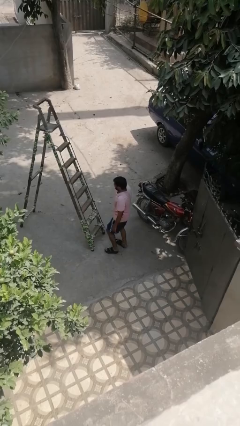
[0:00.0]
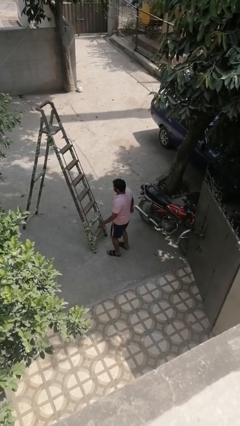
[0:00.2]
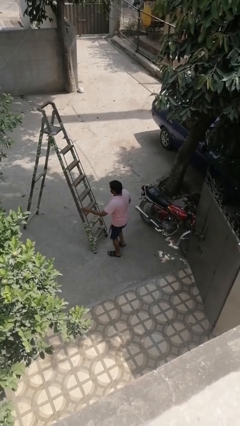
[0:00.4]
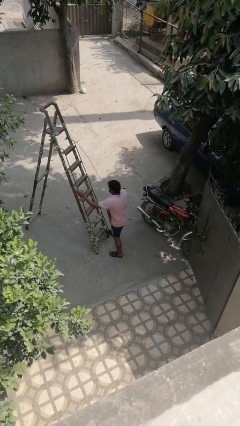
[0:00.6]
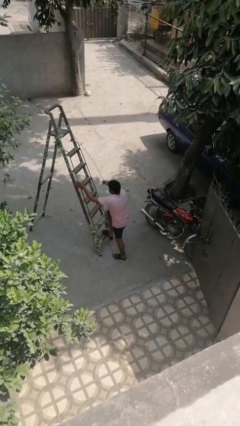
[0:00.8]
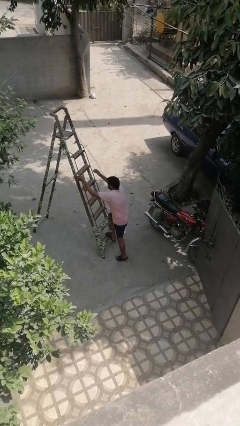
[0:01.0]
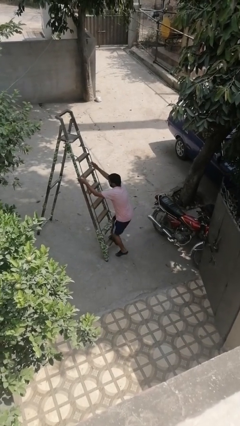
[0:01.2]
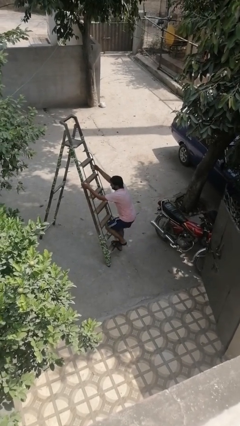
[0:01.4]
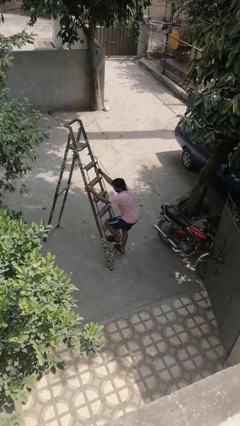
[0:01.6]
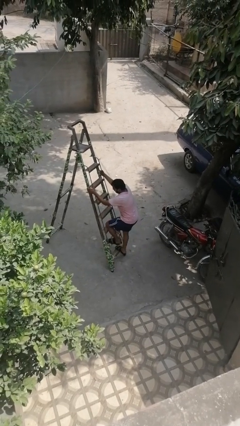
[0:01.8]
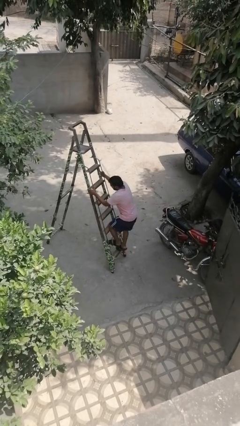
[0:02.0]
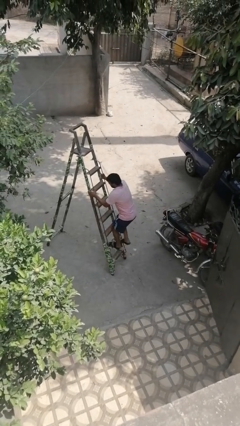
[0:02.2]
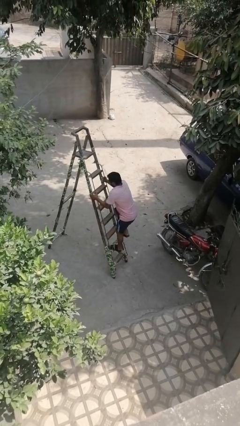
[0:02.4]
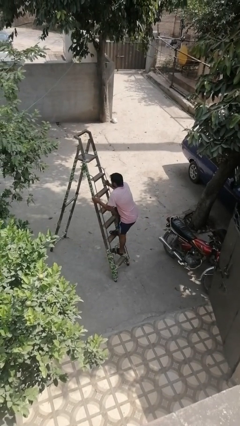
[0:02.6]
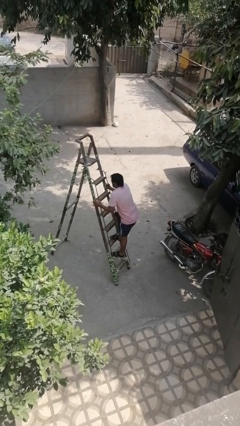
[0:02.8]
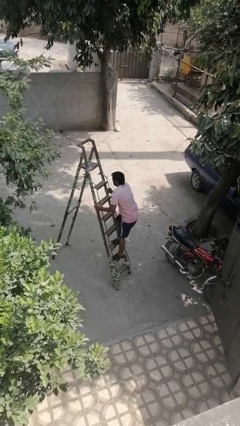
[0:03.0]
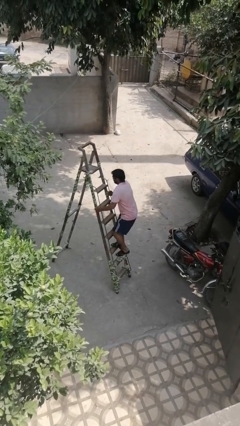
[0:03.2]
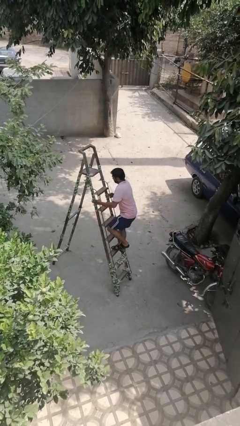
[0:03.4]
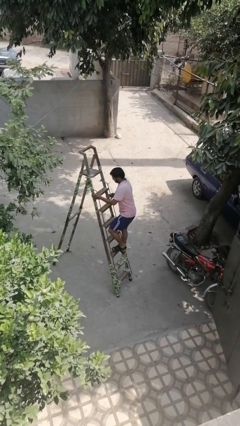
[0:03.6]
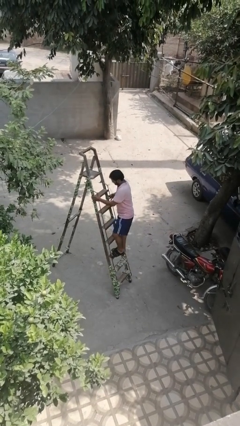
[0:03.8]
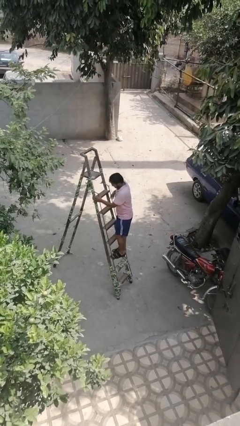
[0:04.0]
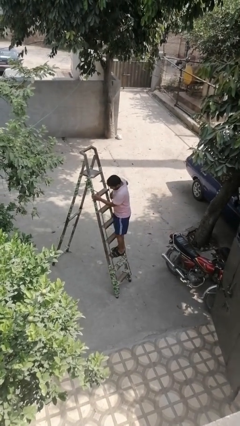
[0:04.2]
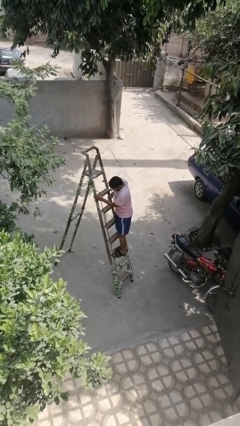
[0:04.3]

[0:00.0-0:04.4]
person climbs up ladder

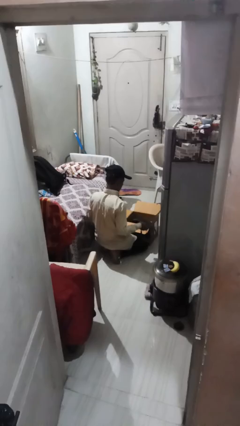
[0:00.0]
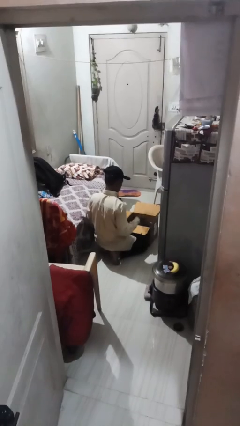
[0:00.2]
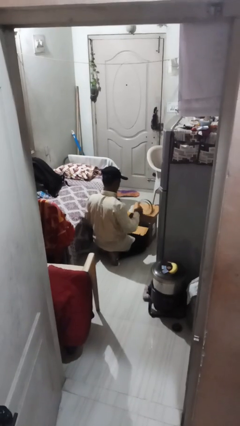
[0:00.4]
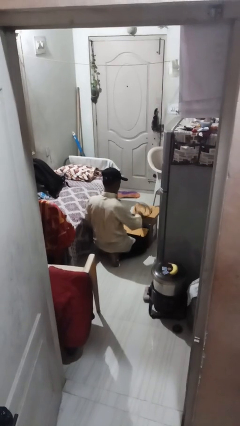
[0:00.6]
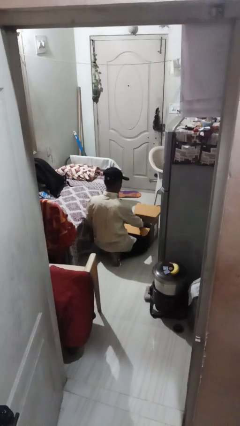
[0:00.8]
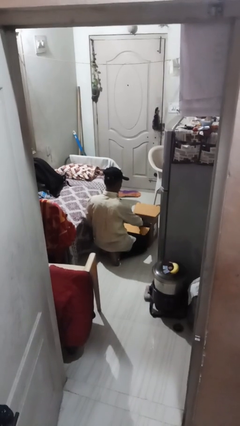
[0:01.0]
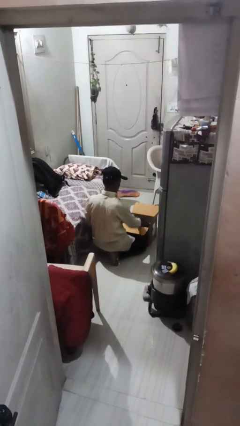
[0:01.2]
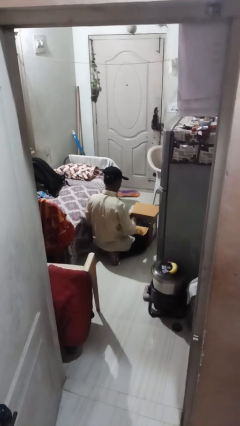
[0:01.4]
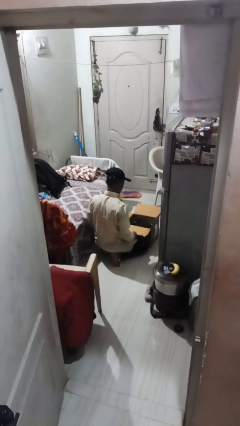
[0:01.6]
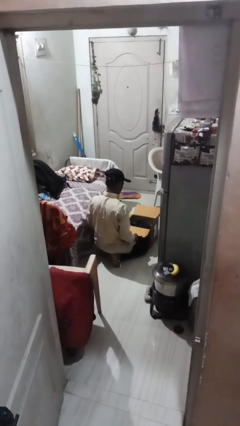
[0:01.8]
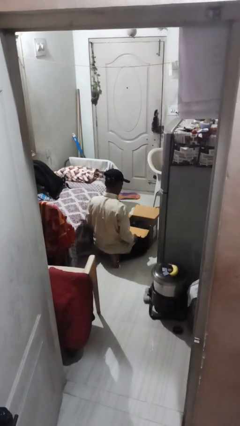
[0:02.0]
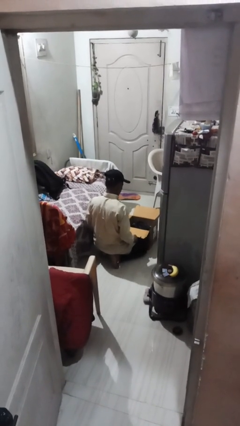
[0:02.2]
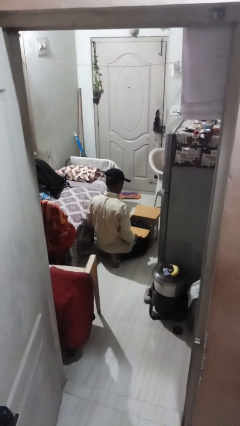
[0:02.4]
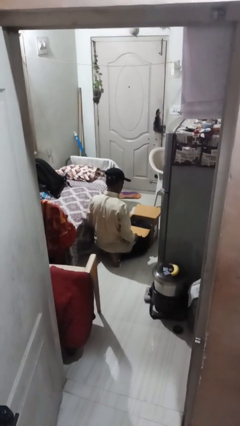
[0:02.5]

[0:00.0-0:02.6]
person puts object into box

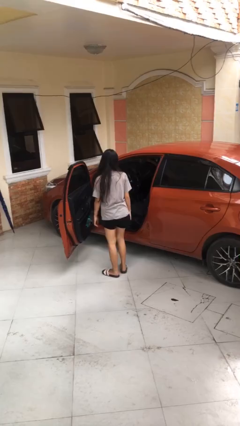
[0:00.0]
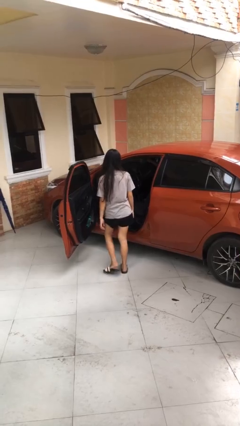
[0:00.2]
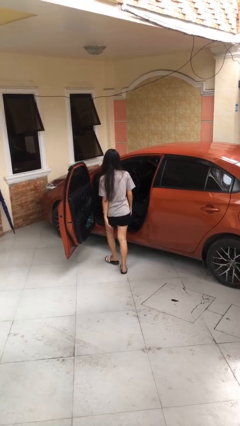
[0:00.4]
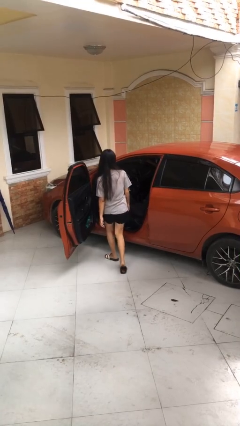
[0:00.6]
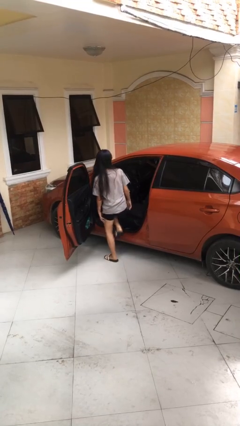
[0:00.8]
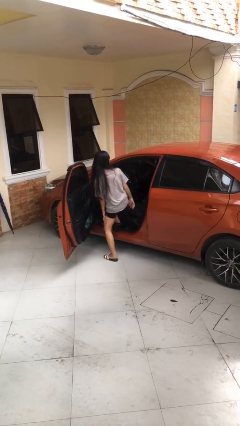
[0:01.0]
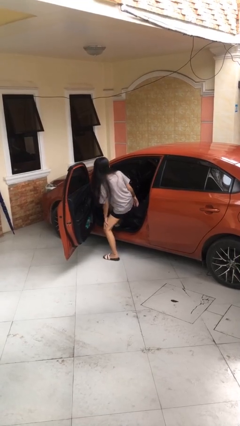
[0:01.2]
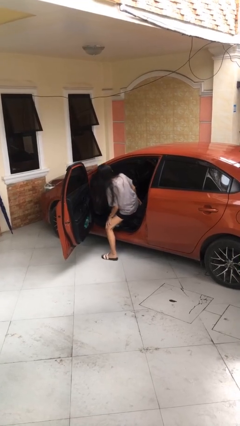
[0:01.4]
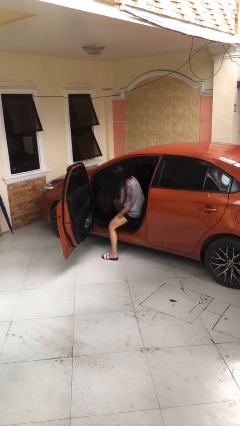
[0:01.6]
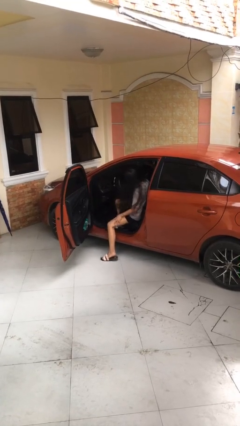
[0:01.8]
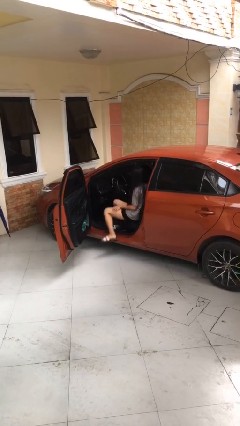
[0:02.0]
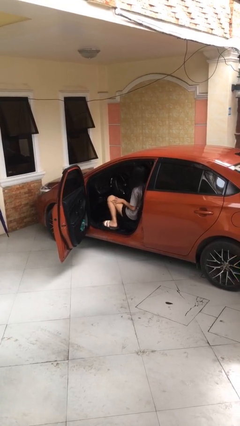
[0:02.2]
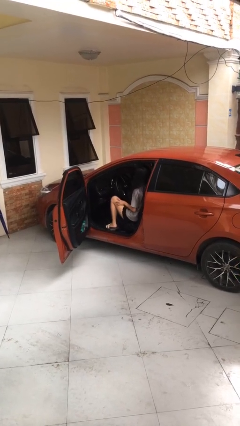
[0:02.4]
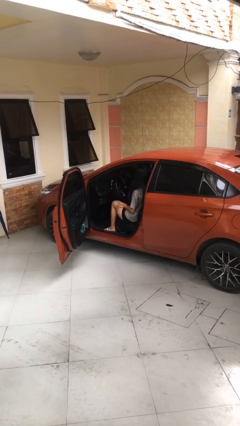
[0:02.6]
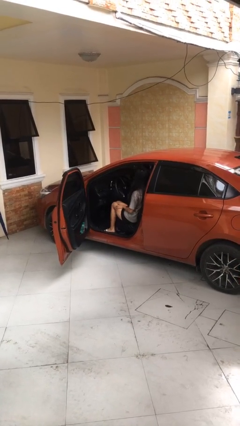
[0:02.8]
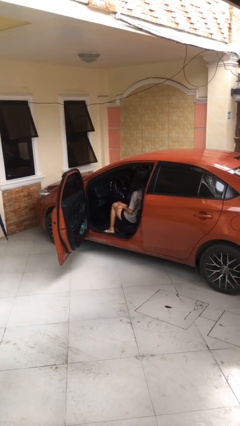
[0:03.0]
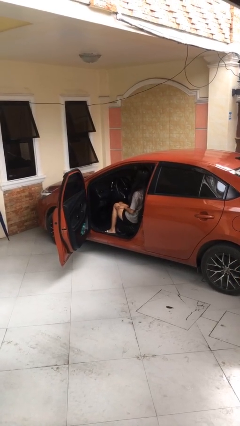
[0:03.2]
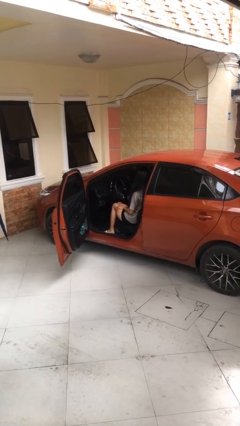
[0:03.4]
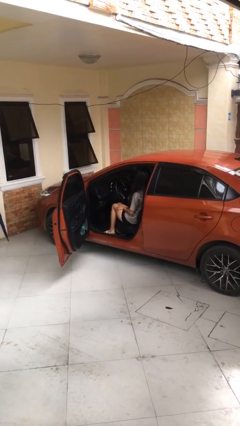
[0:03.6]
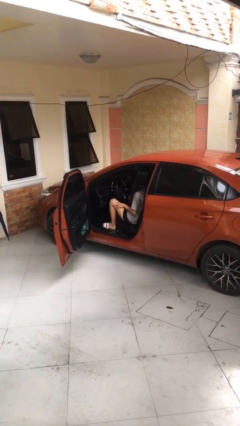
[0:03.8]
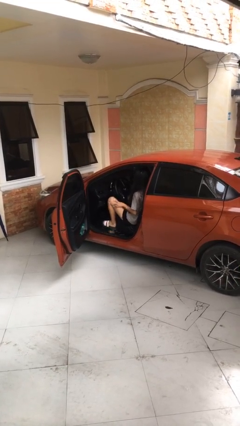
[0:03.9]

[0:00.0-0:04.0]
person enters car

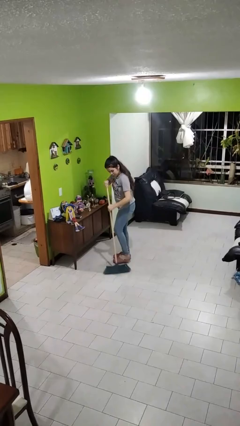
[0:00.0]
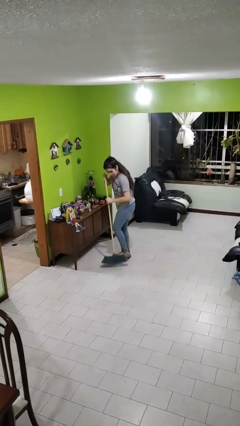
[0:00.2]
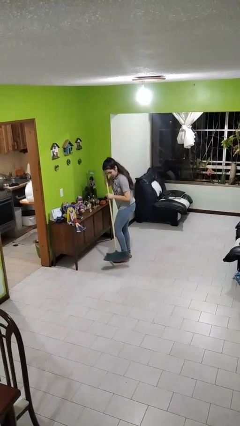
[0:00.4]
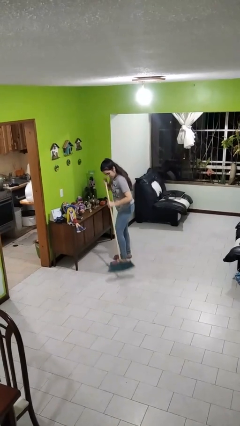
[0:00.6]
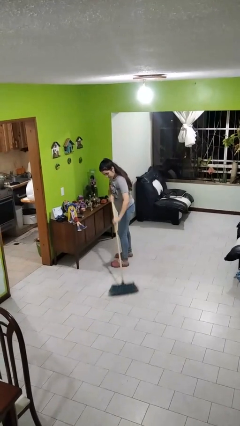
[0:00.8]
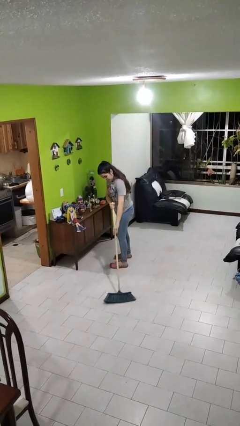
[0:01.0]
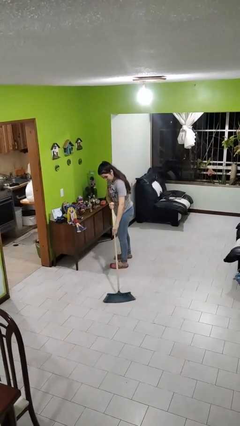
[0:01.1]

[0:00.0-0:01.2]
person sweeps floor

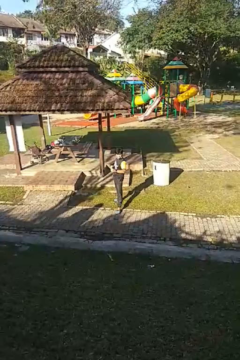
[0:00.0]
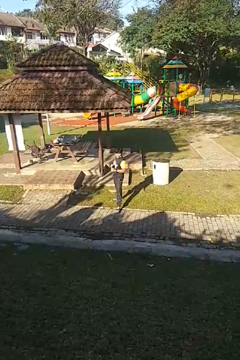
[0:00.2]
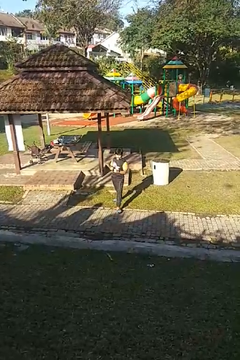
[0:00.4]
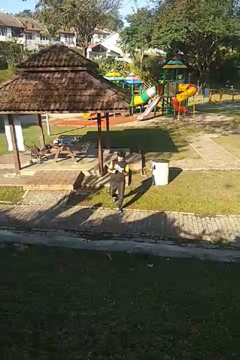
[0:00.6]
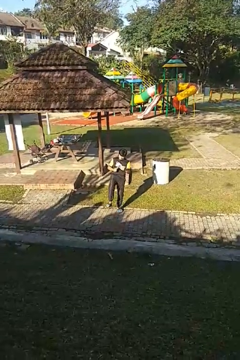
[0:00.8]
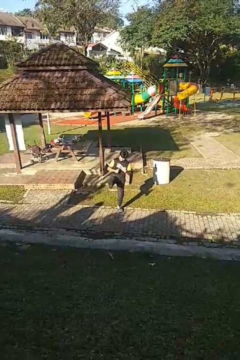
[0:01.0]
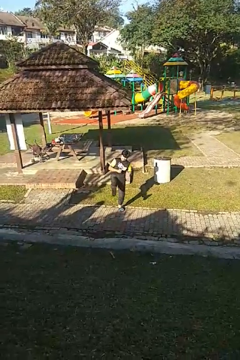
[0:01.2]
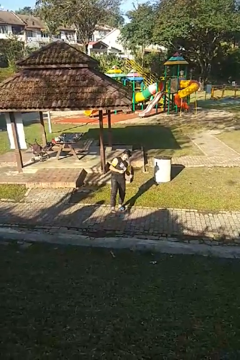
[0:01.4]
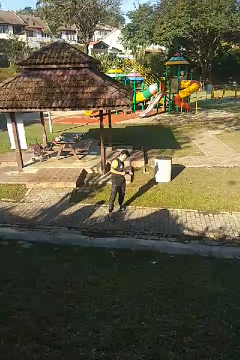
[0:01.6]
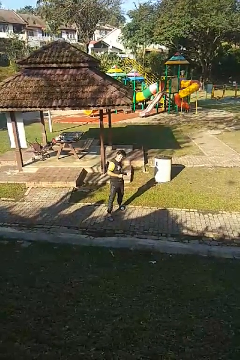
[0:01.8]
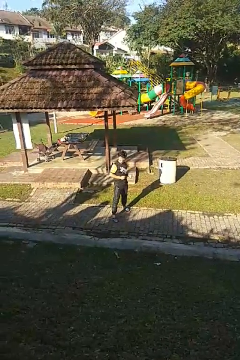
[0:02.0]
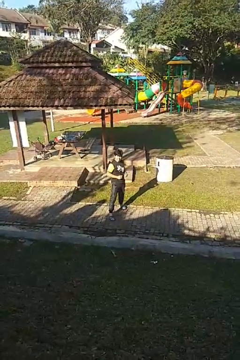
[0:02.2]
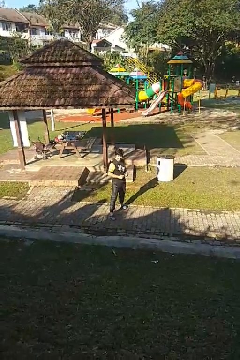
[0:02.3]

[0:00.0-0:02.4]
person karate kicks

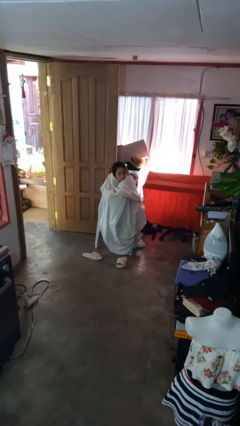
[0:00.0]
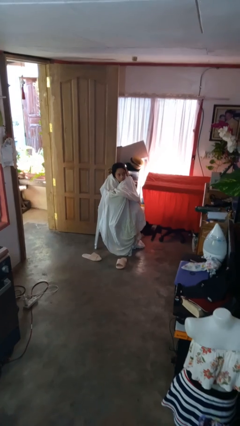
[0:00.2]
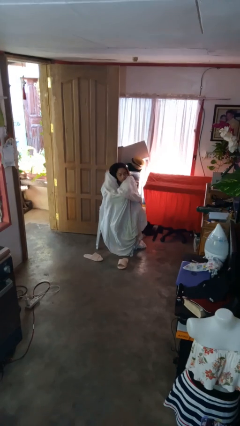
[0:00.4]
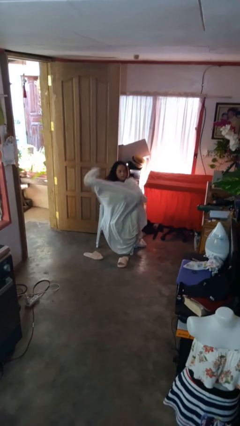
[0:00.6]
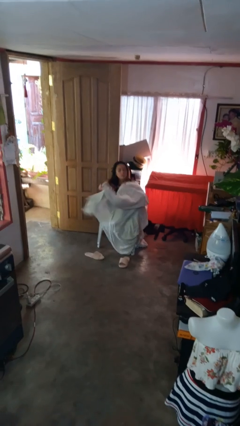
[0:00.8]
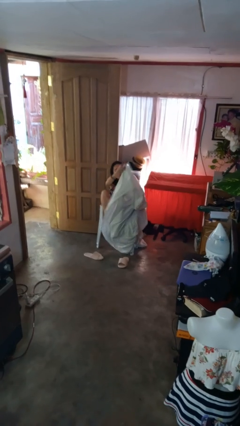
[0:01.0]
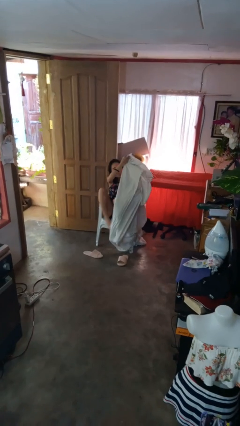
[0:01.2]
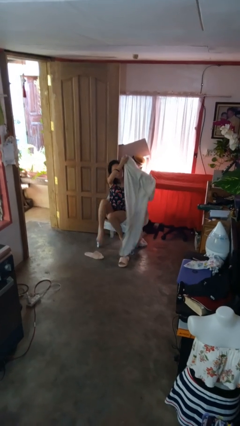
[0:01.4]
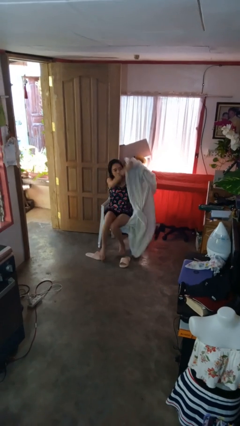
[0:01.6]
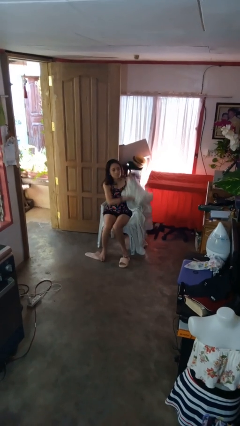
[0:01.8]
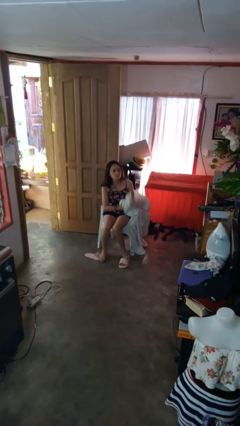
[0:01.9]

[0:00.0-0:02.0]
person uncovers with blanket

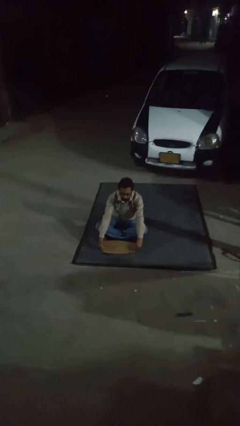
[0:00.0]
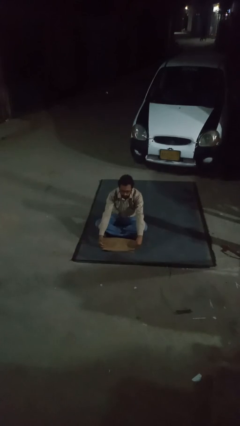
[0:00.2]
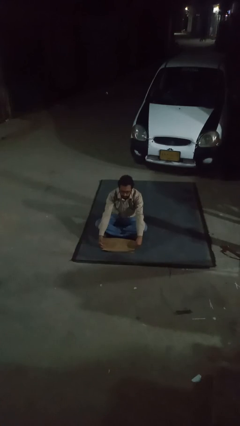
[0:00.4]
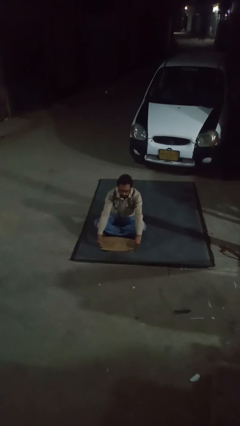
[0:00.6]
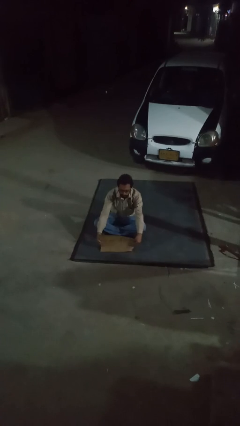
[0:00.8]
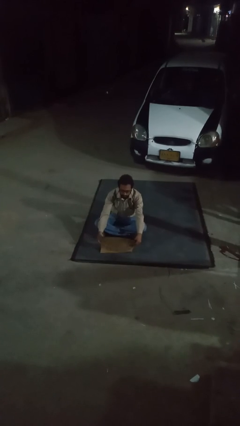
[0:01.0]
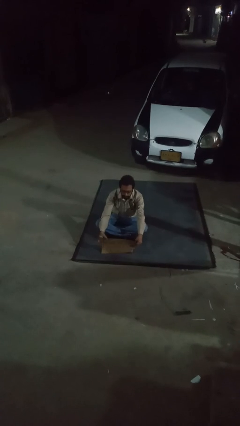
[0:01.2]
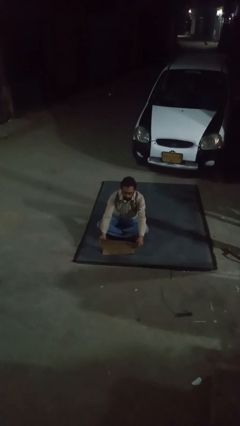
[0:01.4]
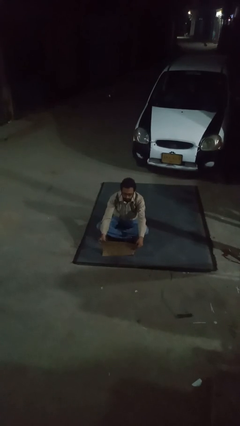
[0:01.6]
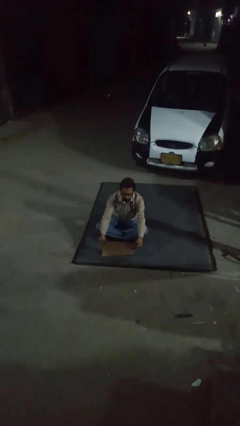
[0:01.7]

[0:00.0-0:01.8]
person opens laptop
